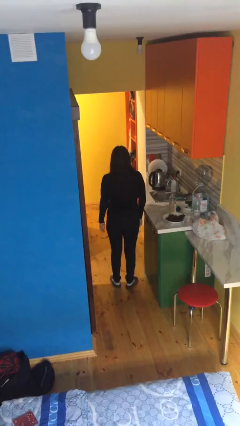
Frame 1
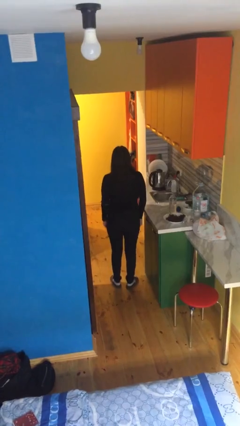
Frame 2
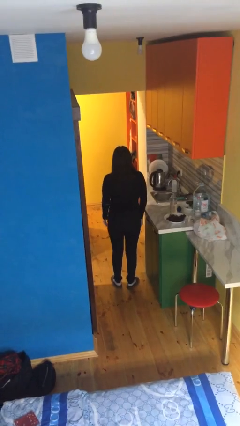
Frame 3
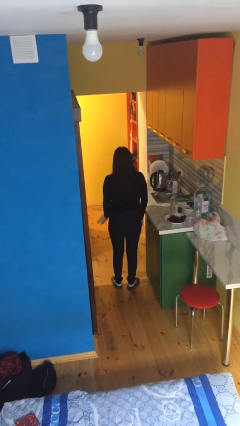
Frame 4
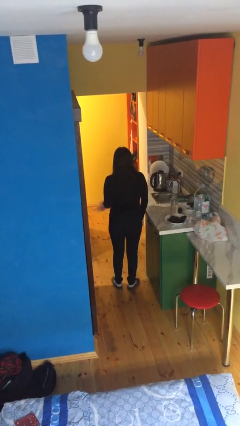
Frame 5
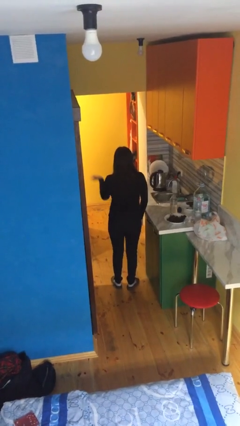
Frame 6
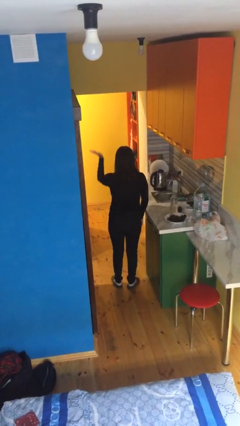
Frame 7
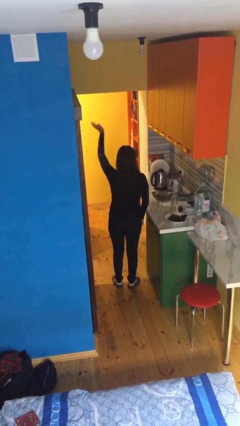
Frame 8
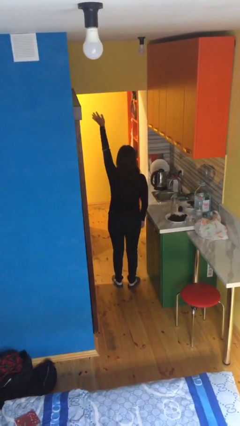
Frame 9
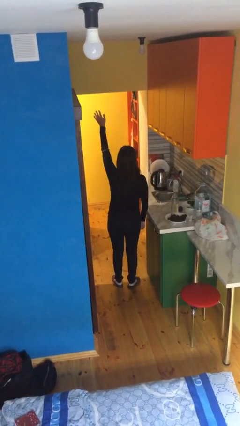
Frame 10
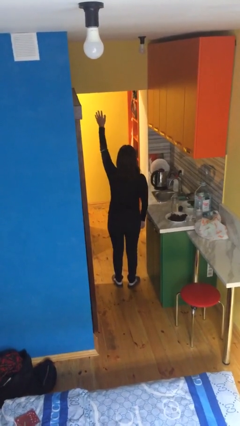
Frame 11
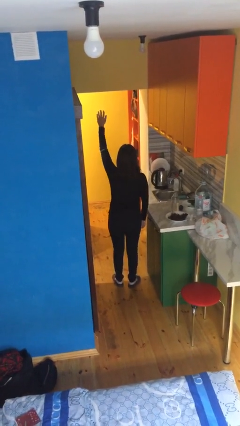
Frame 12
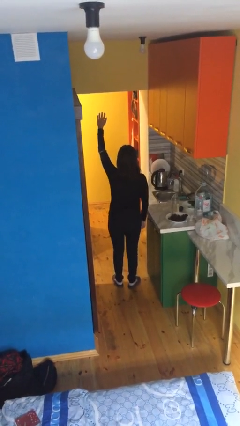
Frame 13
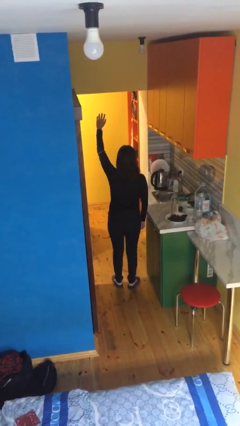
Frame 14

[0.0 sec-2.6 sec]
person gestures swipe up

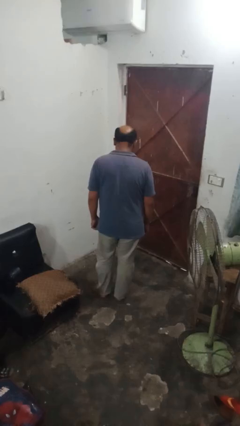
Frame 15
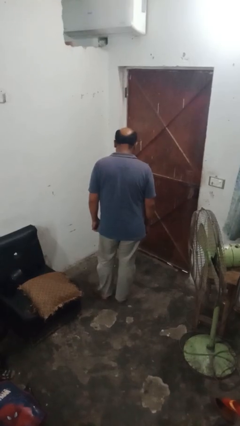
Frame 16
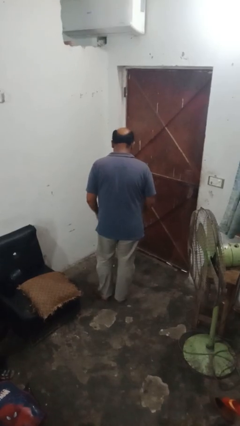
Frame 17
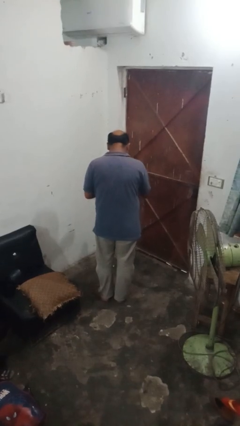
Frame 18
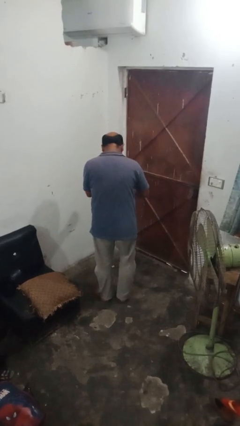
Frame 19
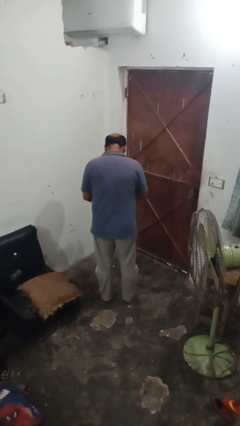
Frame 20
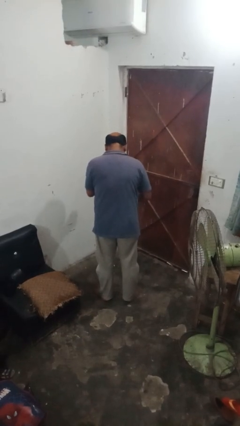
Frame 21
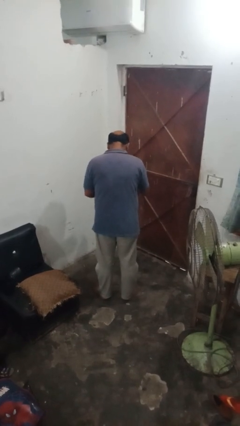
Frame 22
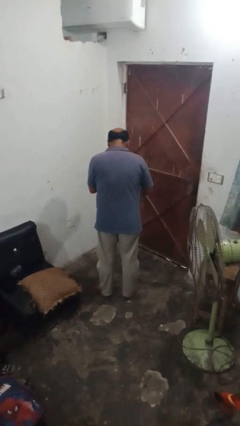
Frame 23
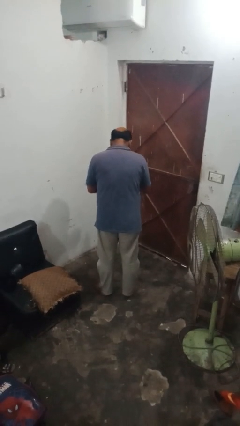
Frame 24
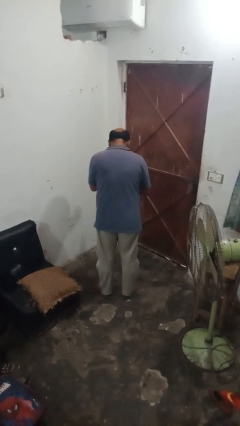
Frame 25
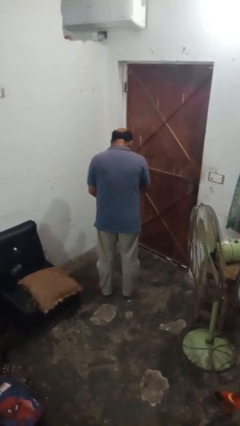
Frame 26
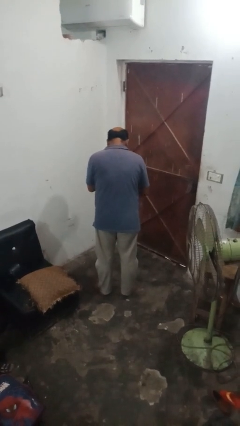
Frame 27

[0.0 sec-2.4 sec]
person drums on chest

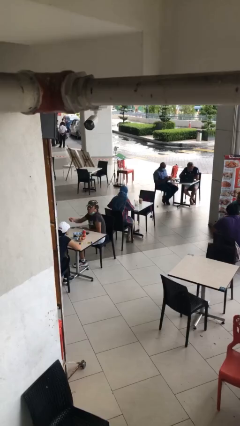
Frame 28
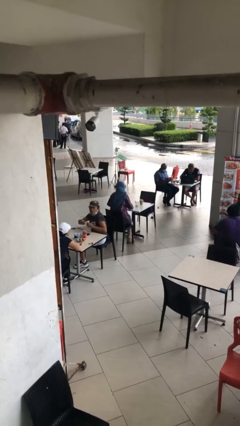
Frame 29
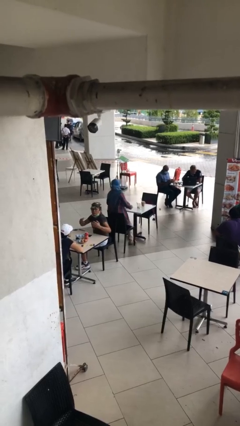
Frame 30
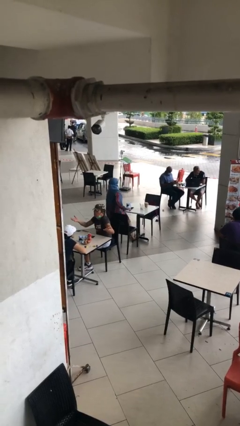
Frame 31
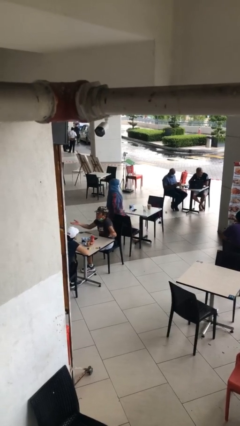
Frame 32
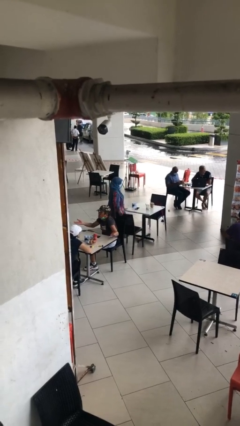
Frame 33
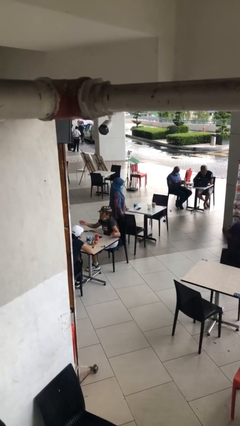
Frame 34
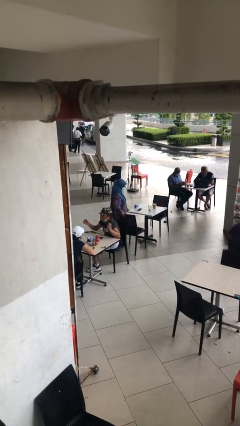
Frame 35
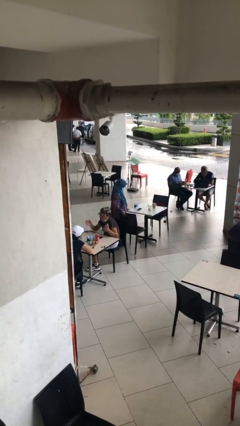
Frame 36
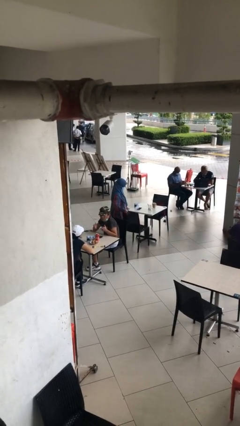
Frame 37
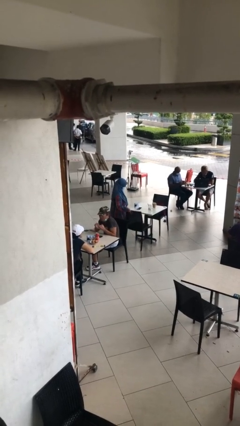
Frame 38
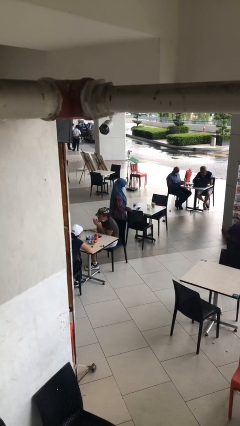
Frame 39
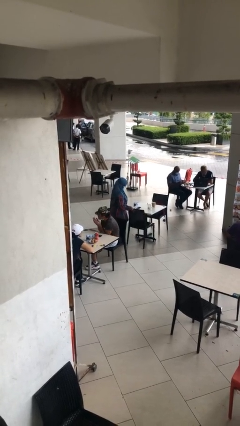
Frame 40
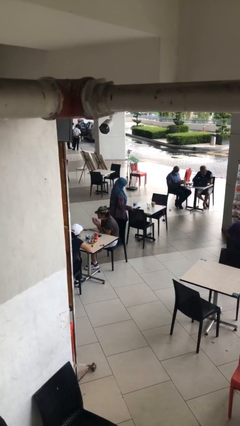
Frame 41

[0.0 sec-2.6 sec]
person stands up

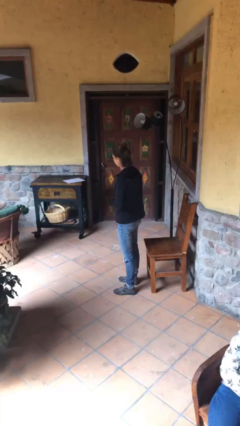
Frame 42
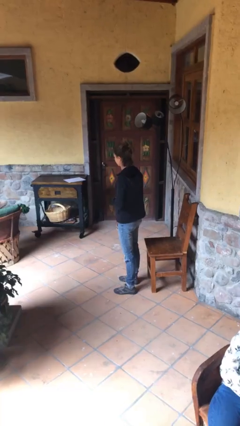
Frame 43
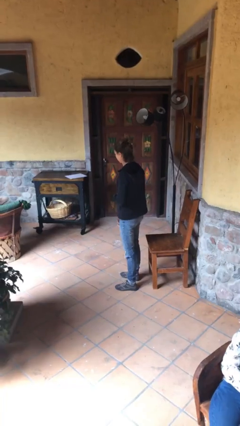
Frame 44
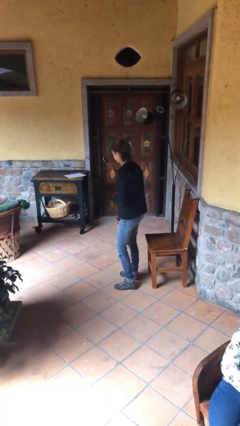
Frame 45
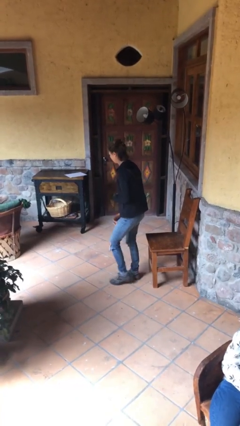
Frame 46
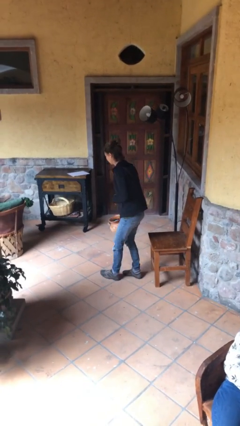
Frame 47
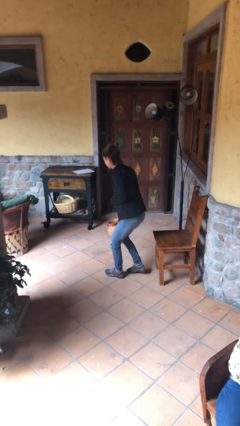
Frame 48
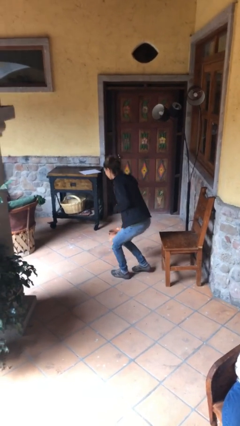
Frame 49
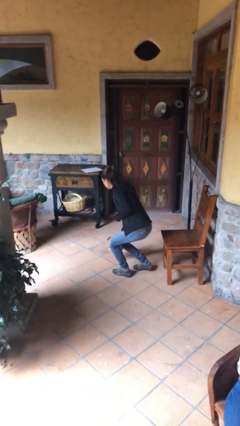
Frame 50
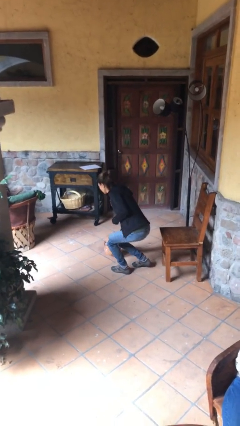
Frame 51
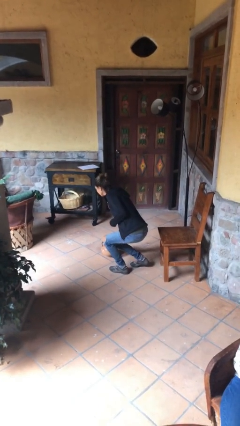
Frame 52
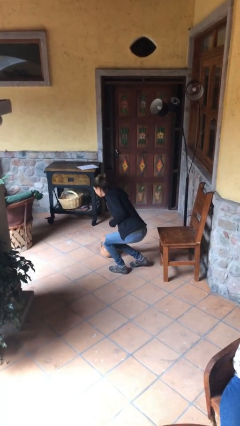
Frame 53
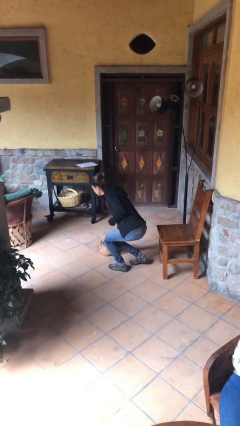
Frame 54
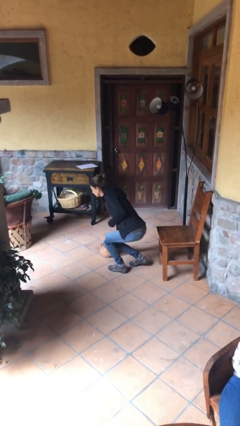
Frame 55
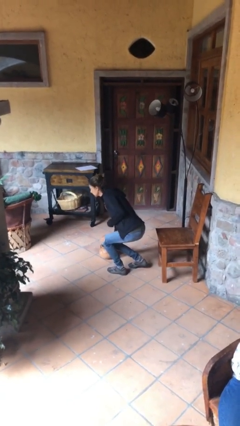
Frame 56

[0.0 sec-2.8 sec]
person puts down object on floor

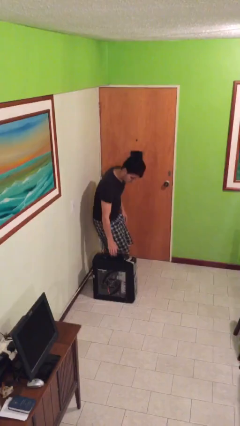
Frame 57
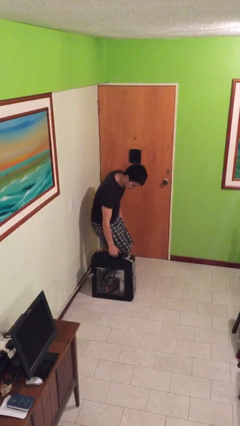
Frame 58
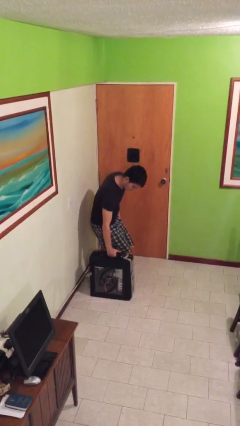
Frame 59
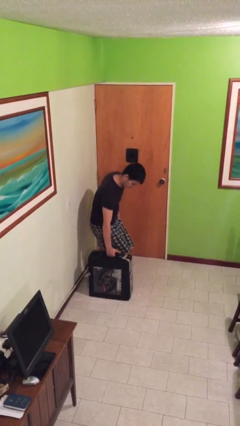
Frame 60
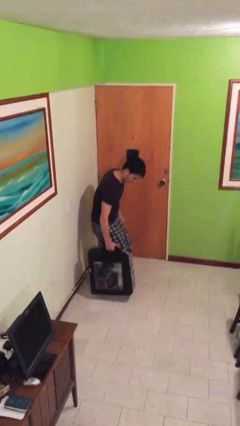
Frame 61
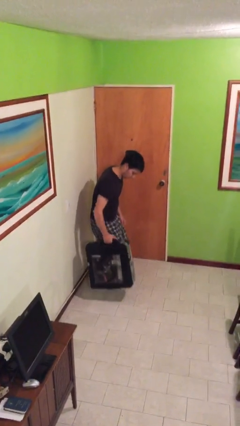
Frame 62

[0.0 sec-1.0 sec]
person picks up object from floor

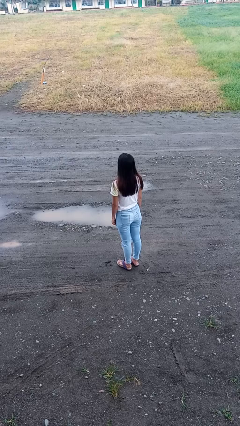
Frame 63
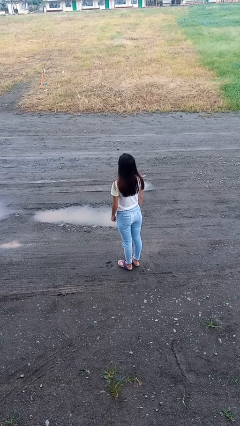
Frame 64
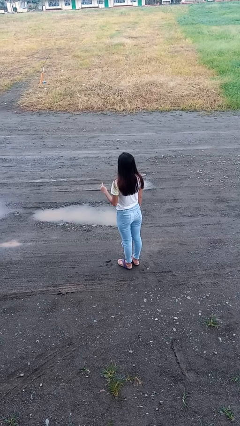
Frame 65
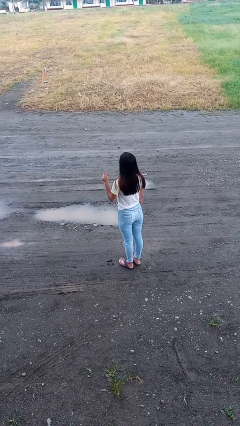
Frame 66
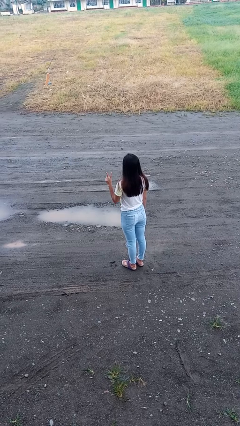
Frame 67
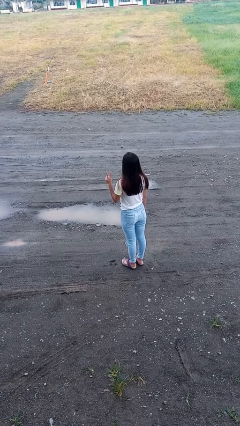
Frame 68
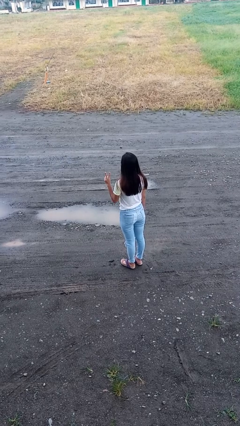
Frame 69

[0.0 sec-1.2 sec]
person gestures peace

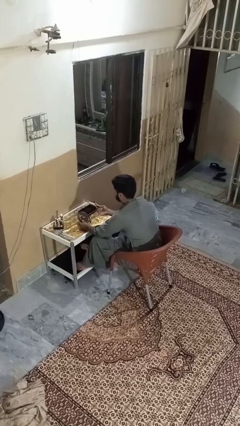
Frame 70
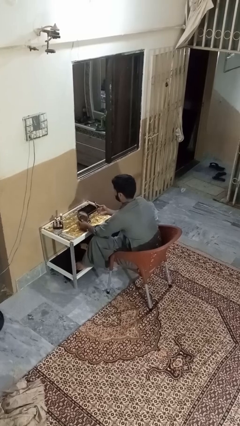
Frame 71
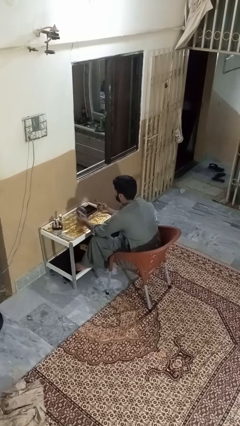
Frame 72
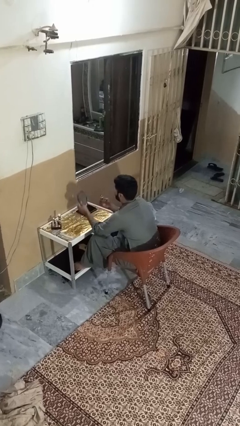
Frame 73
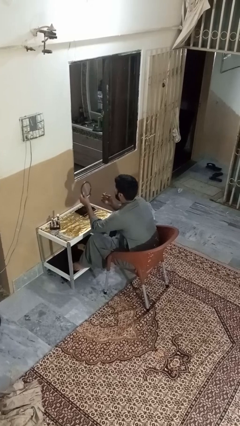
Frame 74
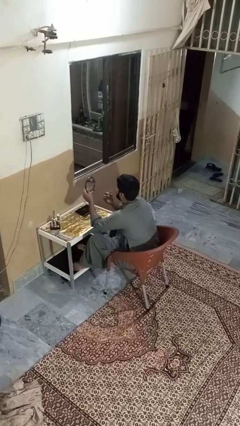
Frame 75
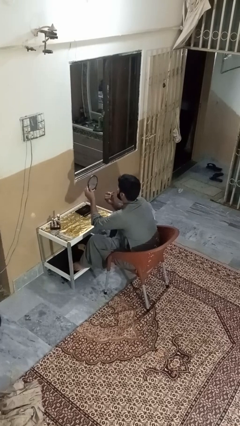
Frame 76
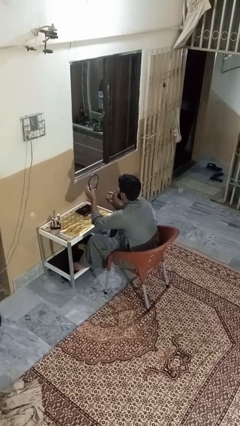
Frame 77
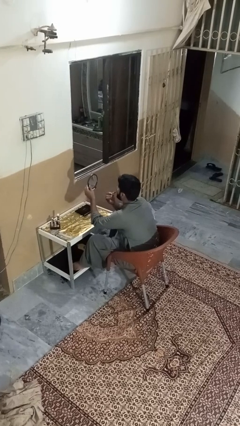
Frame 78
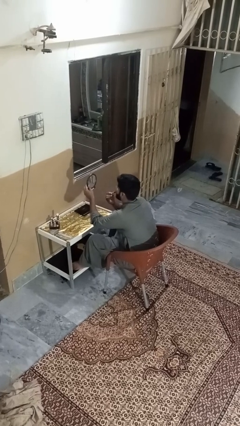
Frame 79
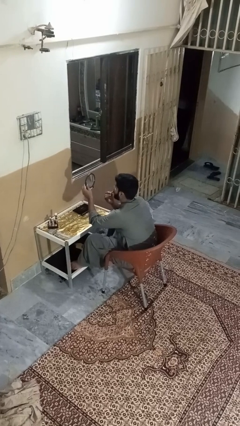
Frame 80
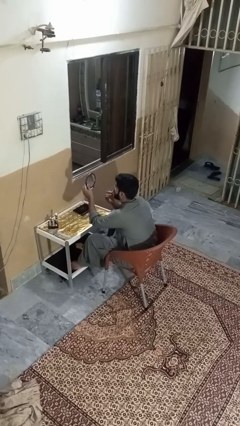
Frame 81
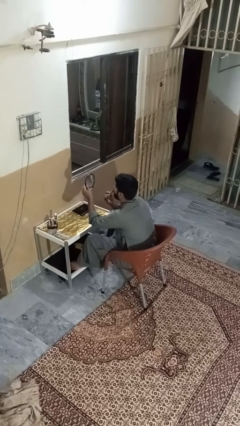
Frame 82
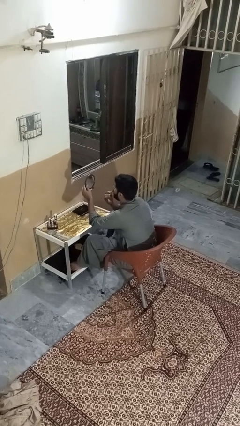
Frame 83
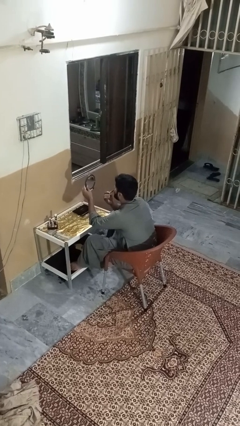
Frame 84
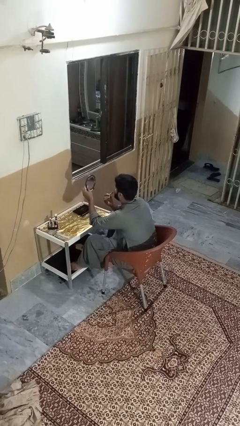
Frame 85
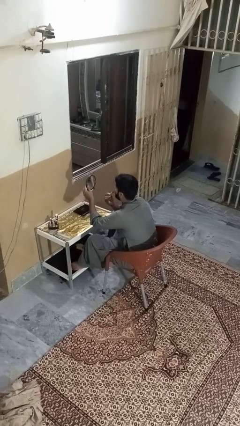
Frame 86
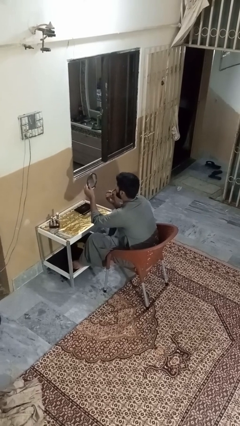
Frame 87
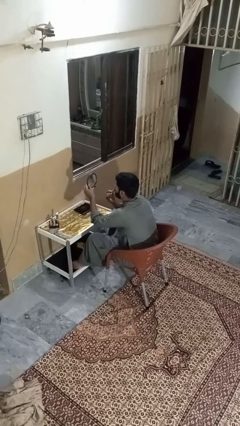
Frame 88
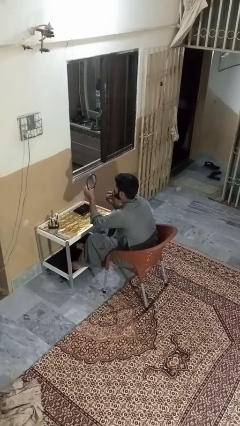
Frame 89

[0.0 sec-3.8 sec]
person applies lip makeup

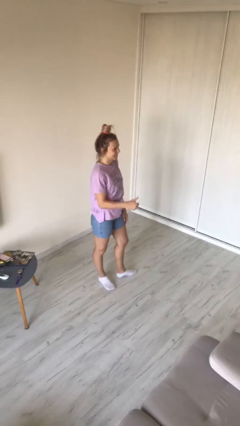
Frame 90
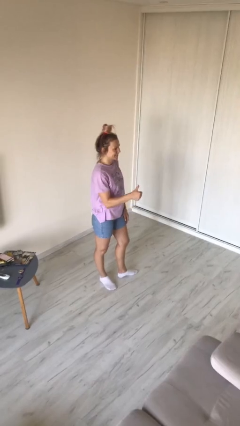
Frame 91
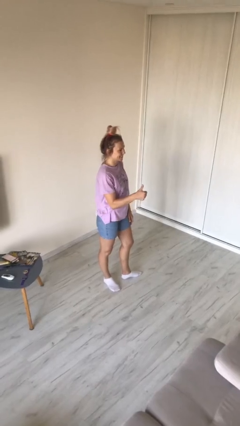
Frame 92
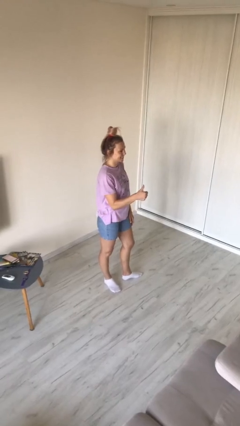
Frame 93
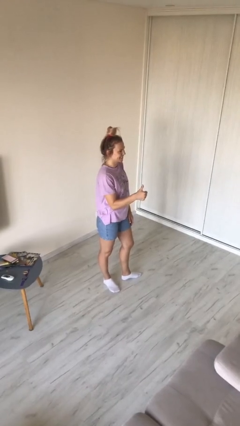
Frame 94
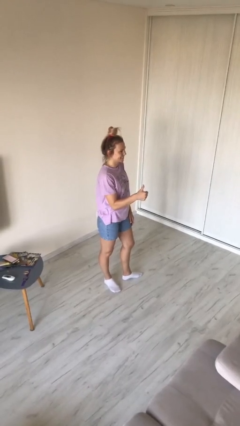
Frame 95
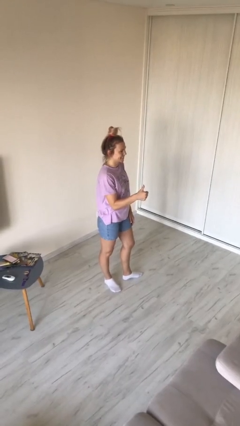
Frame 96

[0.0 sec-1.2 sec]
person gestures thumbs up
